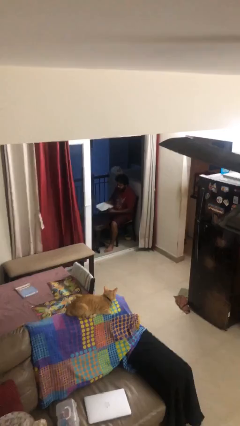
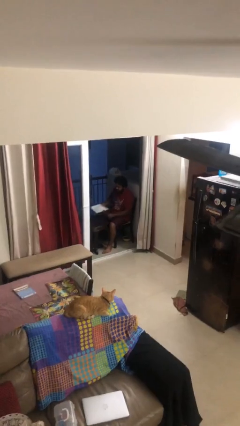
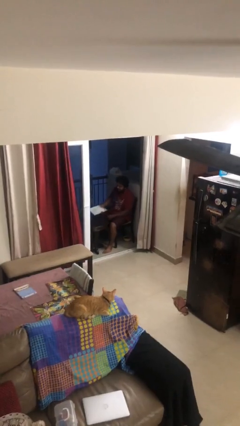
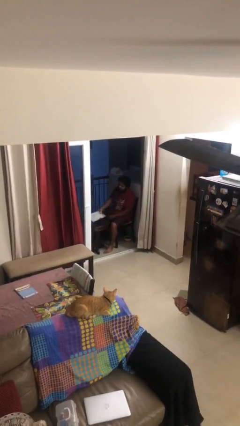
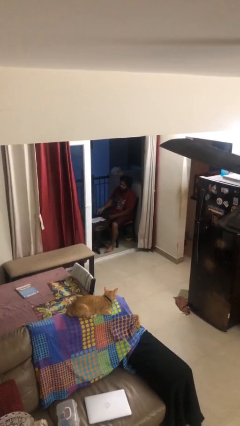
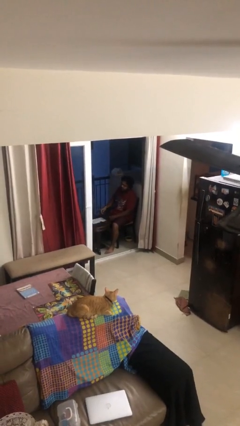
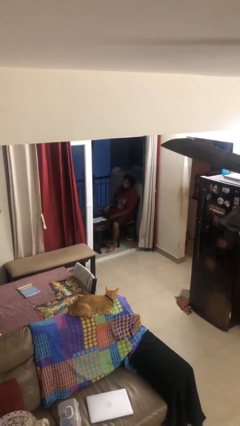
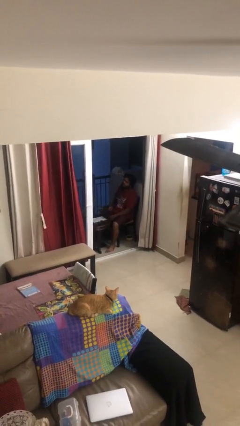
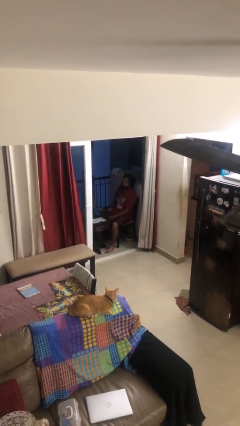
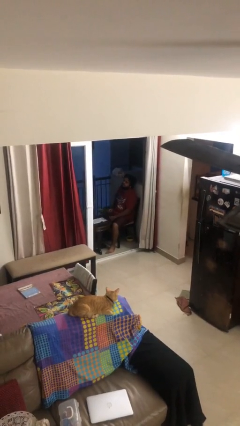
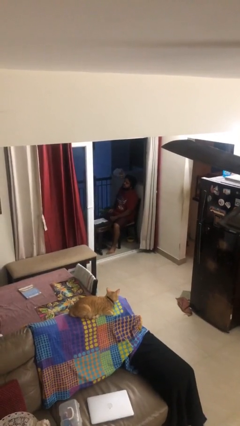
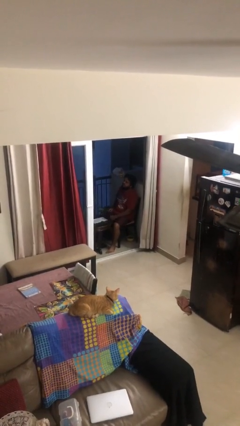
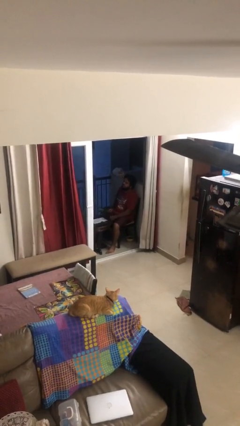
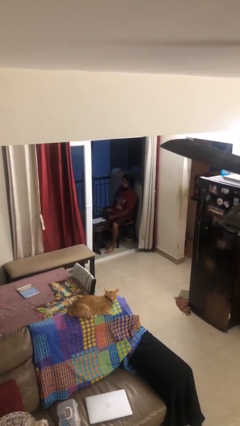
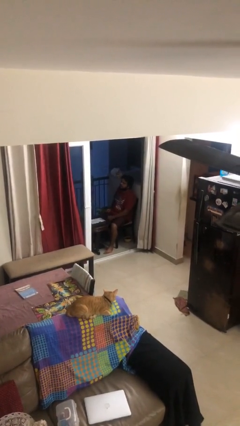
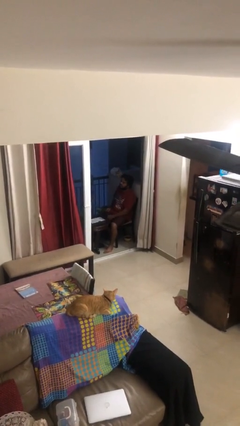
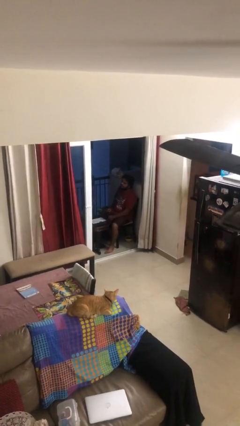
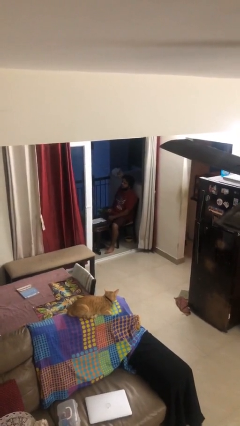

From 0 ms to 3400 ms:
person puts down object on table

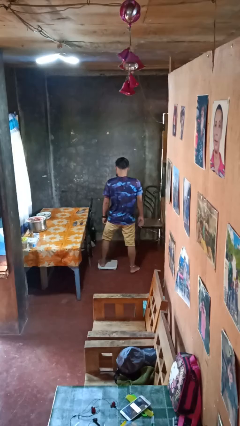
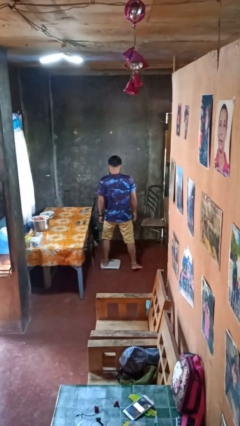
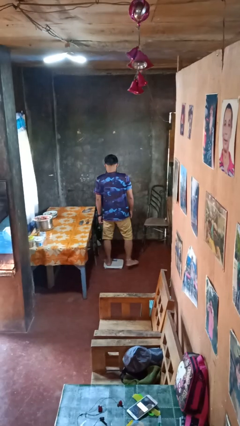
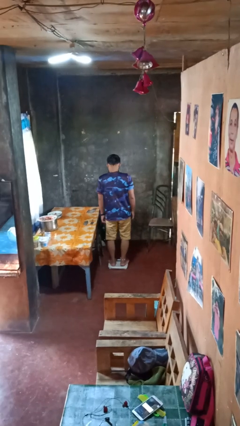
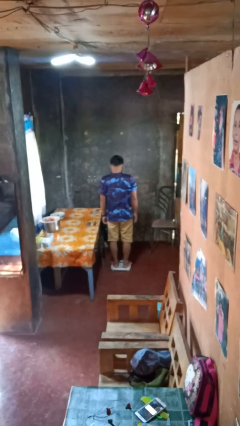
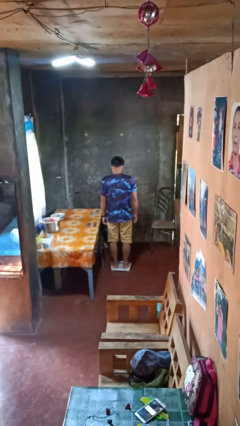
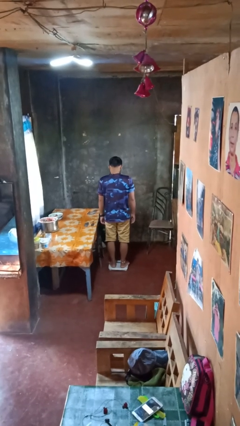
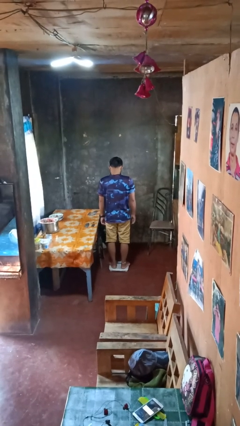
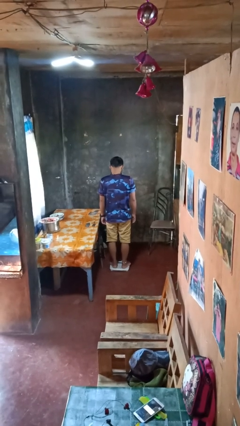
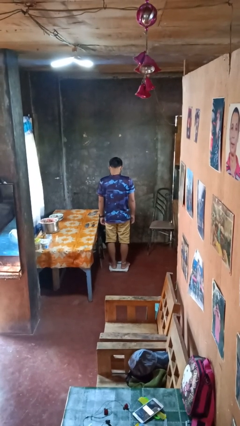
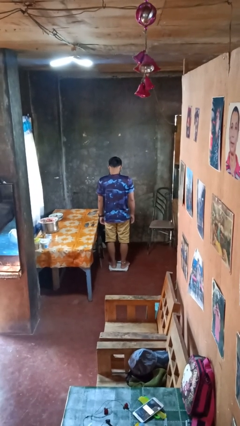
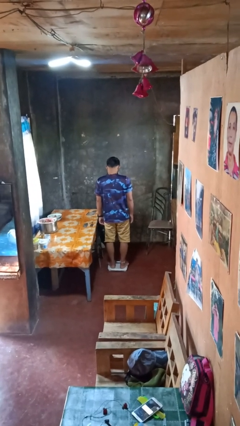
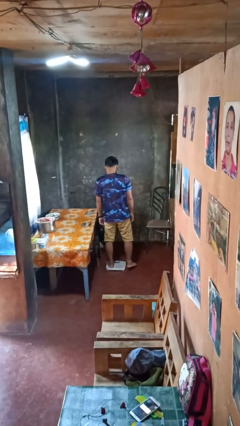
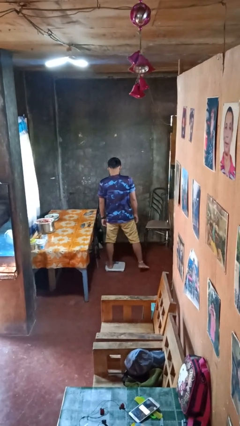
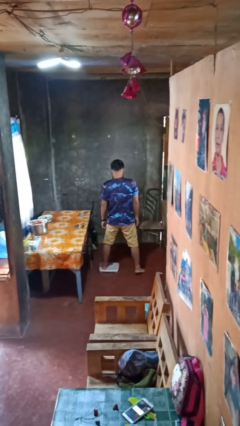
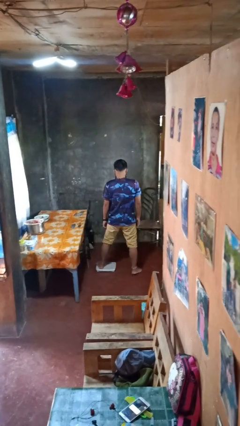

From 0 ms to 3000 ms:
person uses bodyweight scale

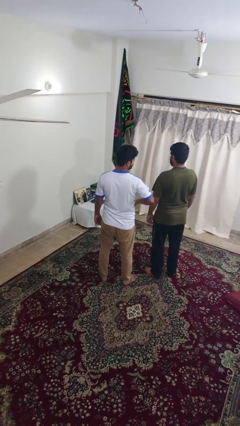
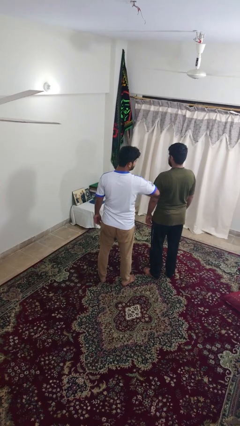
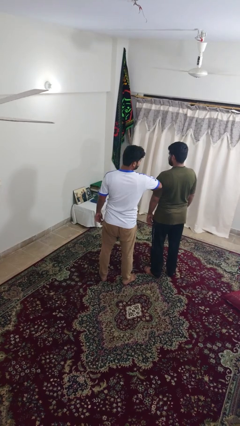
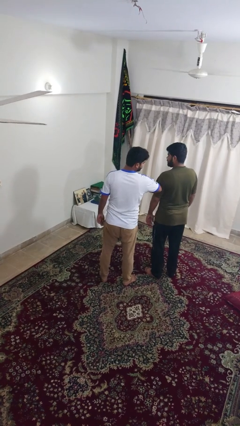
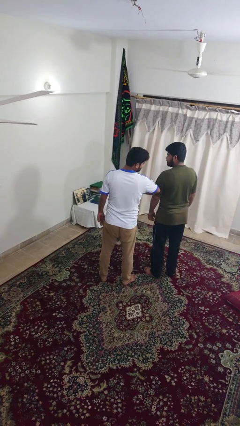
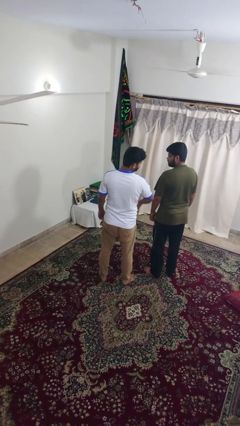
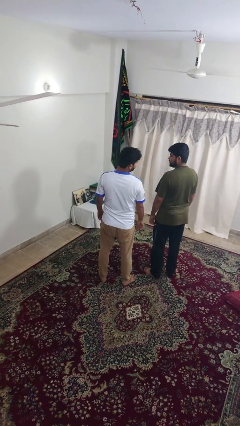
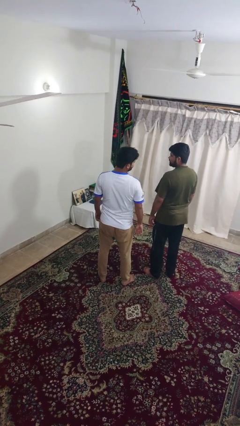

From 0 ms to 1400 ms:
person nudges person with elbow

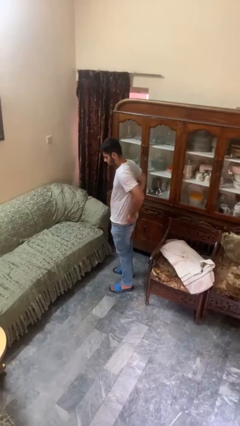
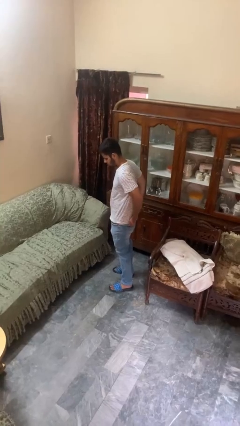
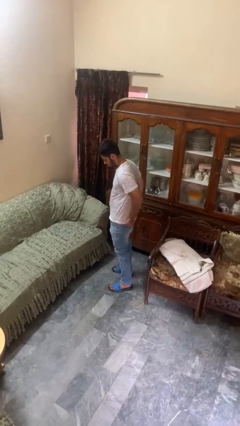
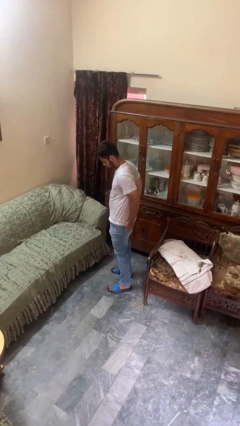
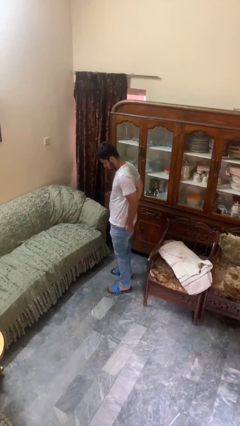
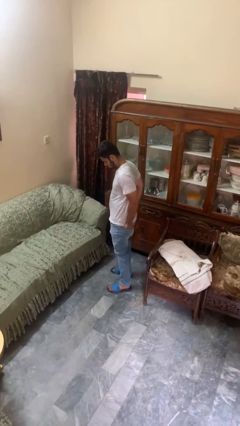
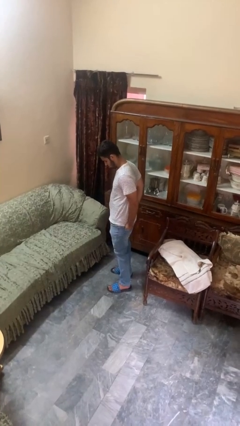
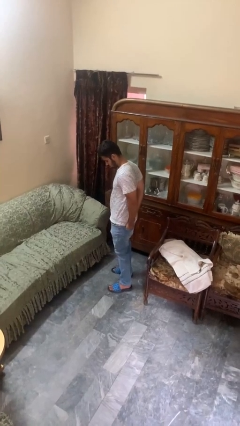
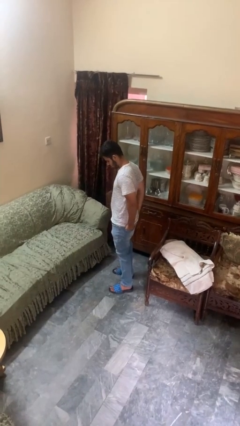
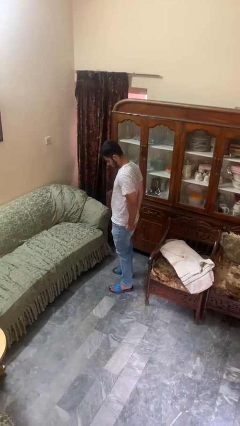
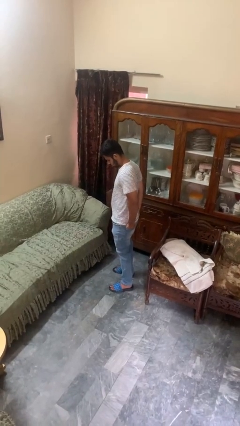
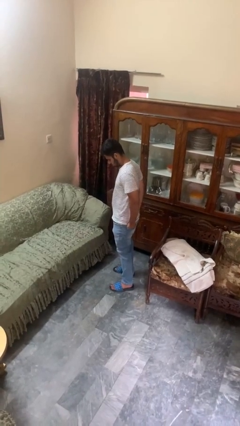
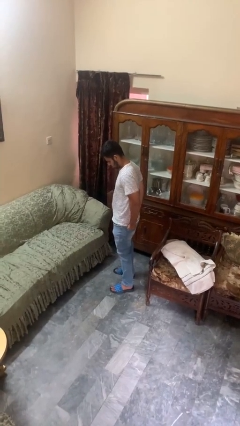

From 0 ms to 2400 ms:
person puts hands in back pockets

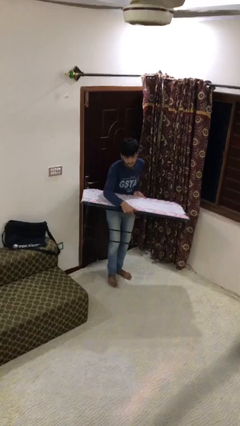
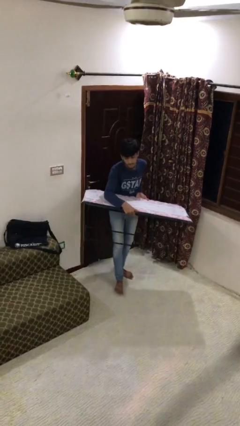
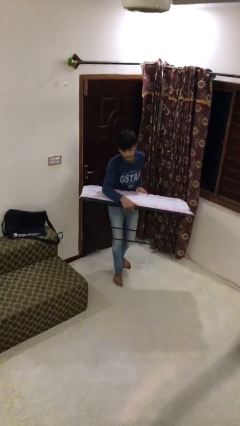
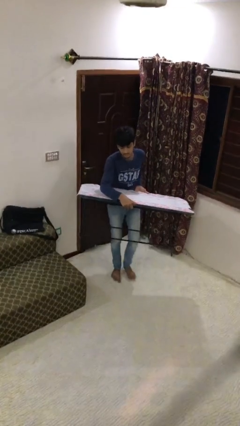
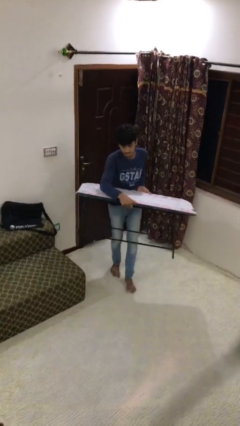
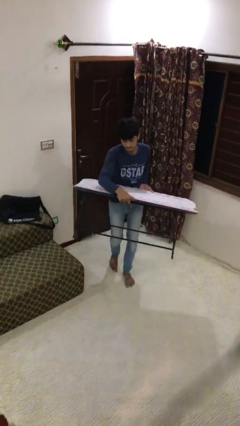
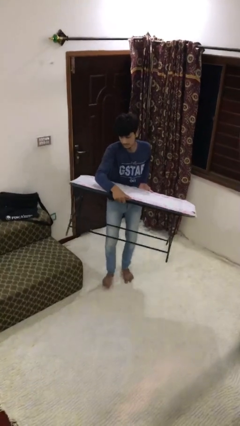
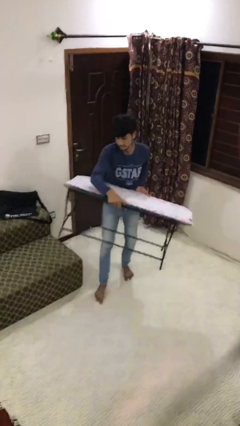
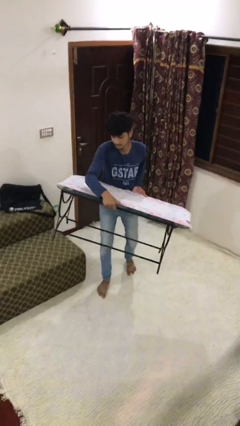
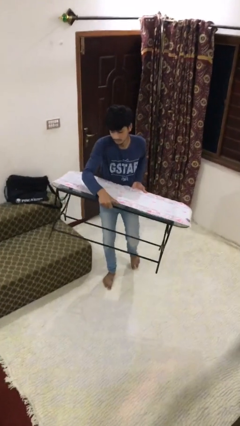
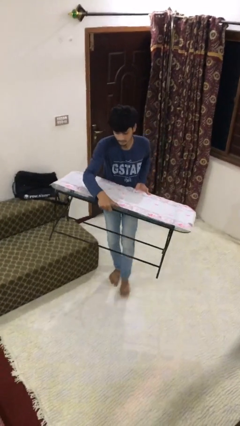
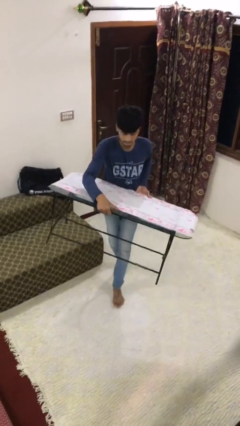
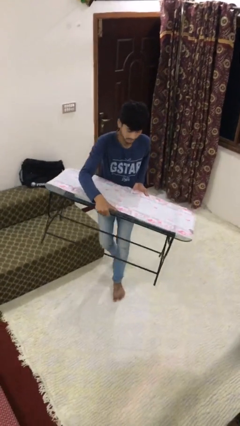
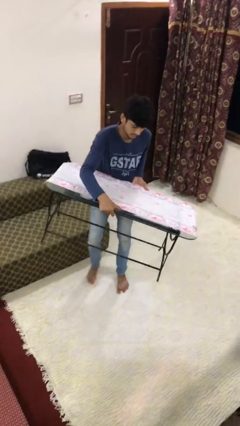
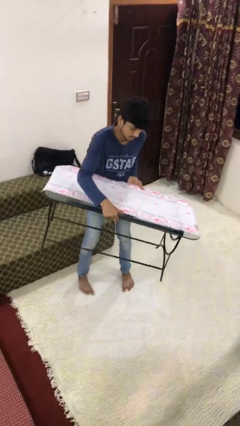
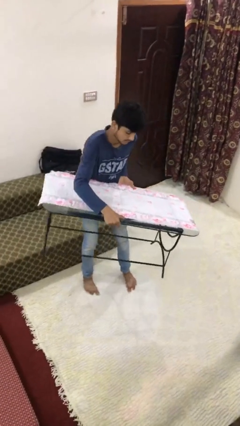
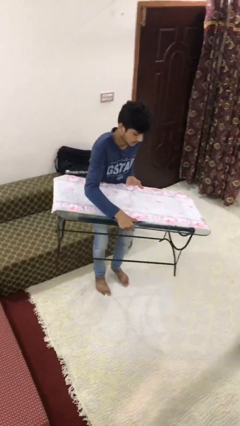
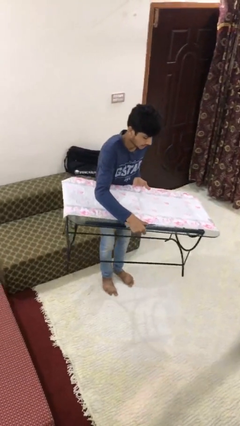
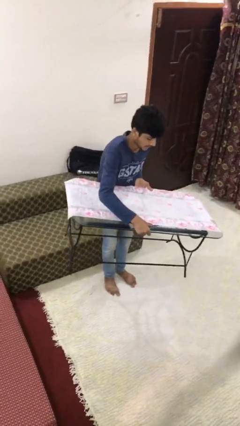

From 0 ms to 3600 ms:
person carries heavy object

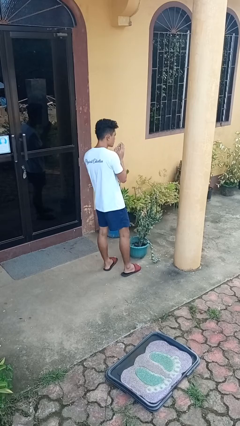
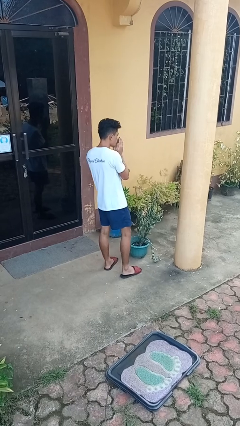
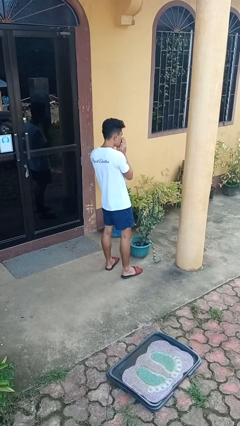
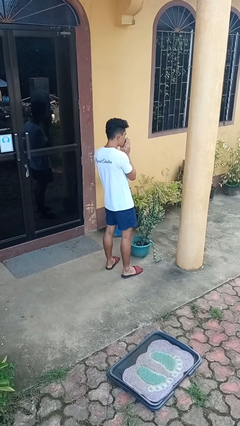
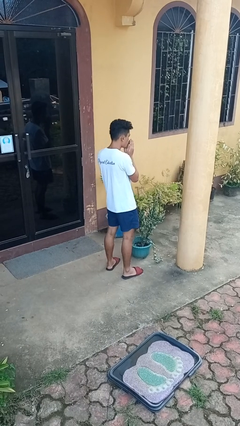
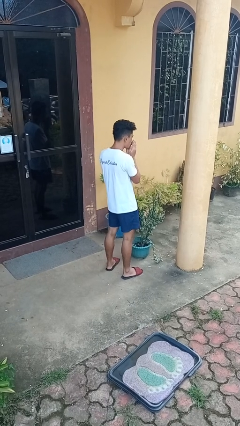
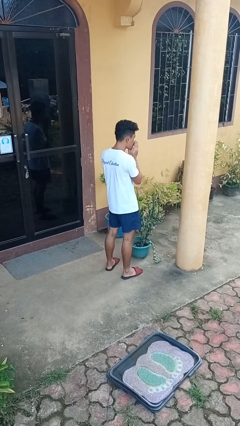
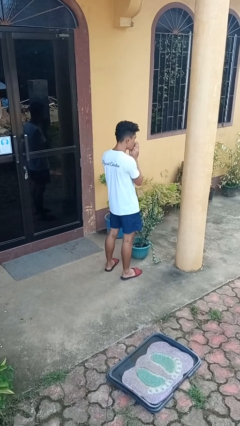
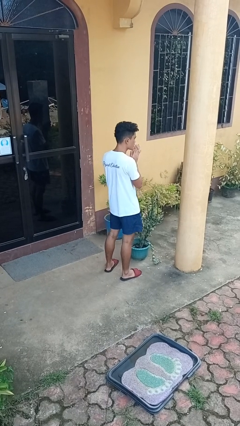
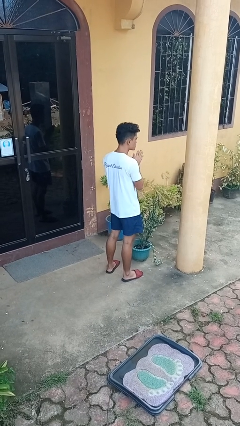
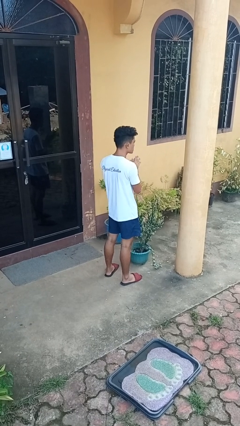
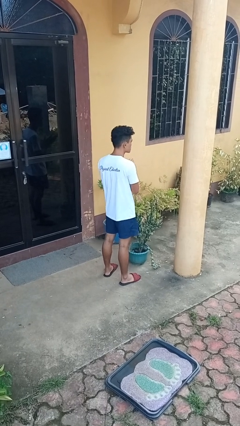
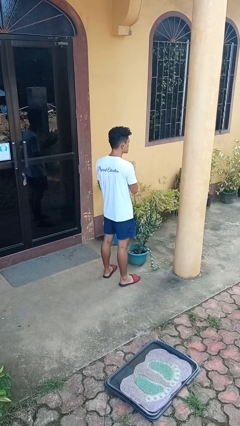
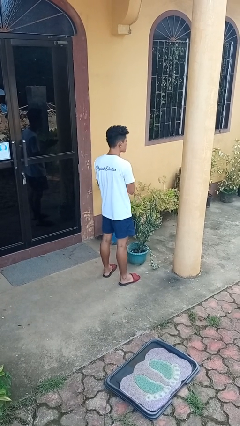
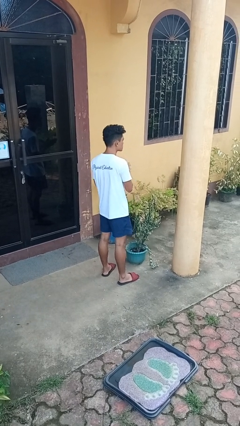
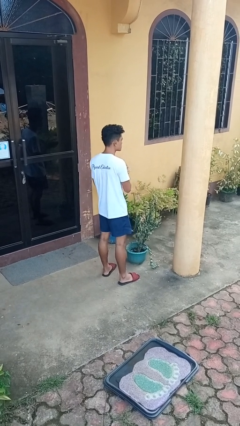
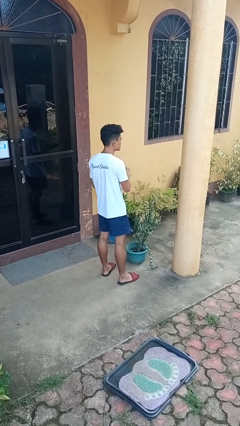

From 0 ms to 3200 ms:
person blows into hands

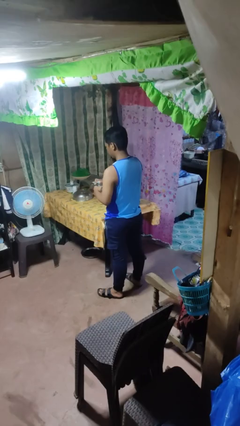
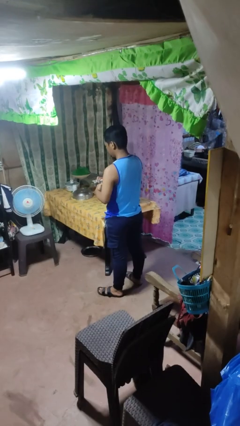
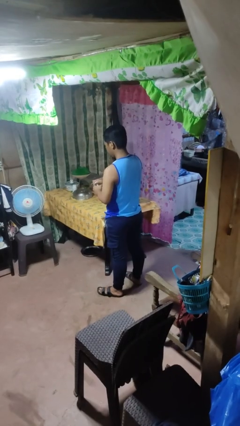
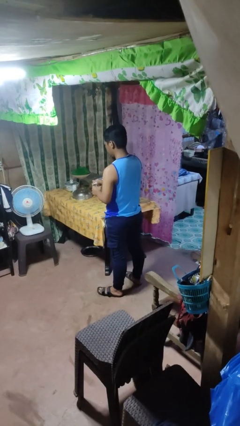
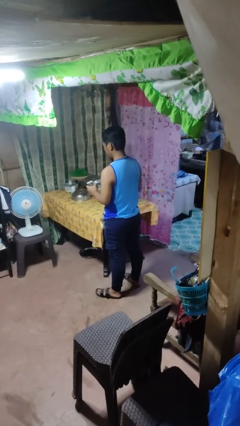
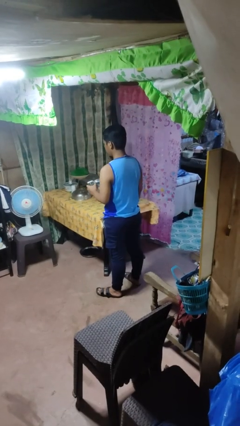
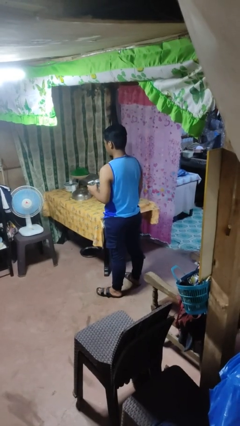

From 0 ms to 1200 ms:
person closes jar
